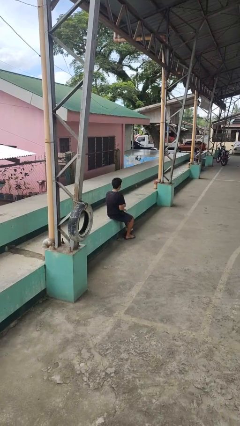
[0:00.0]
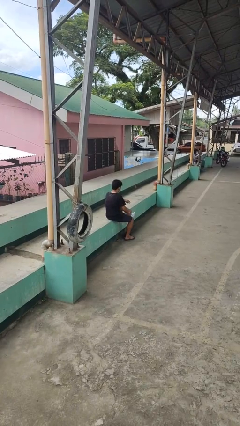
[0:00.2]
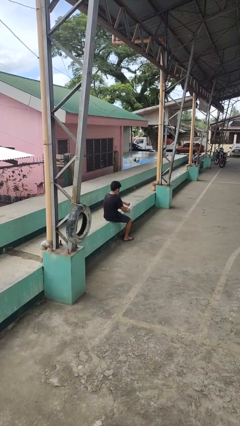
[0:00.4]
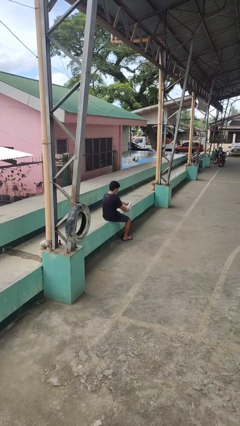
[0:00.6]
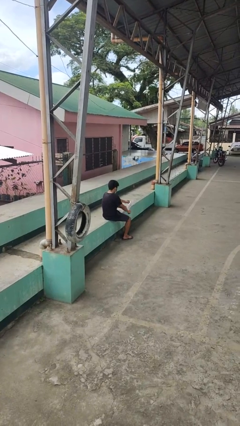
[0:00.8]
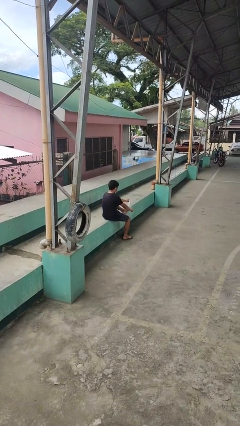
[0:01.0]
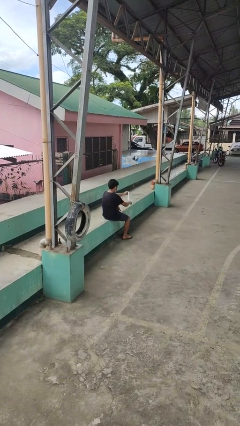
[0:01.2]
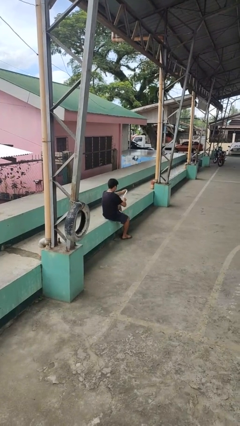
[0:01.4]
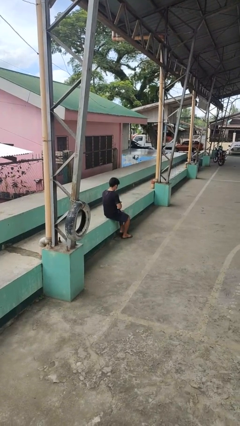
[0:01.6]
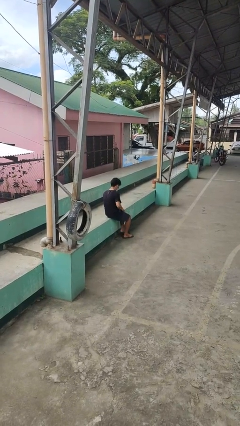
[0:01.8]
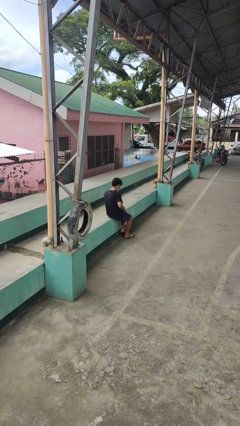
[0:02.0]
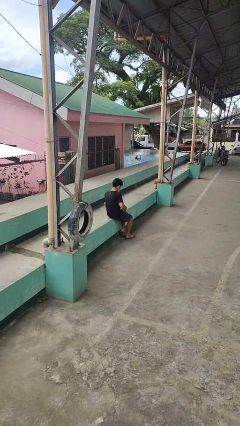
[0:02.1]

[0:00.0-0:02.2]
person takes off socks

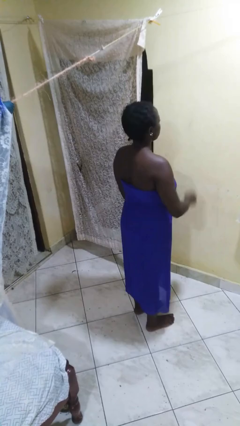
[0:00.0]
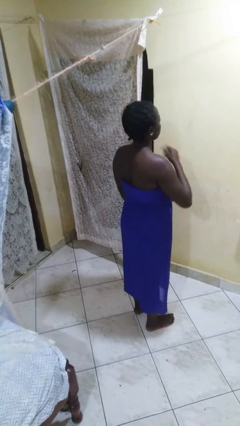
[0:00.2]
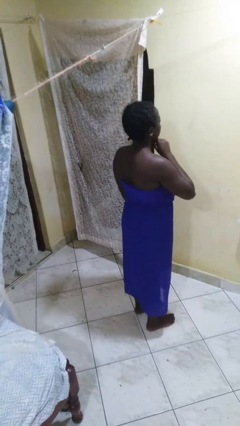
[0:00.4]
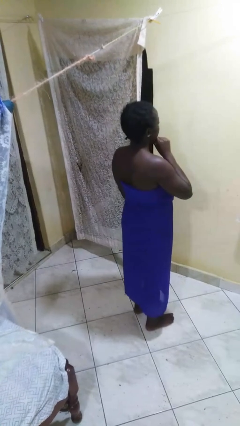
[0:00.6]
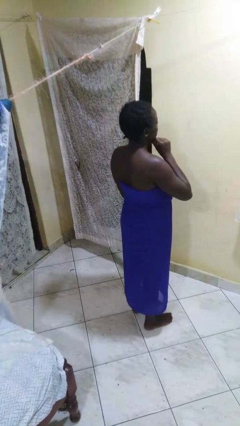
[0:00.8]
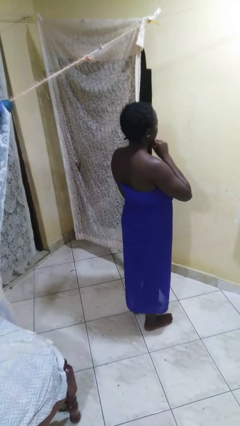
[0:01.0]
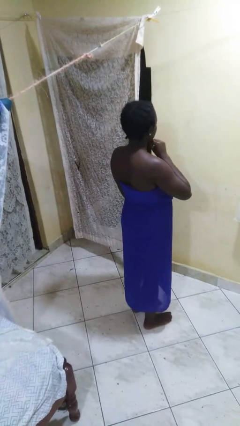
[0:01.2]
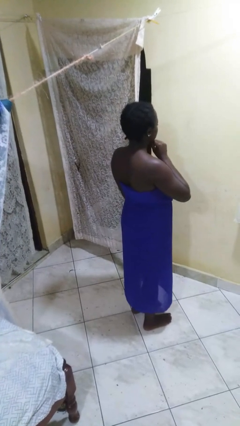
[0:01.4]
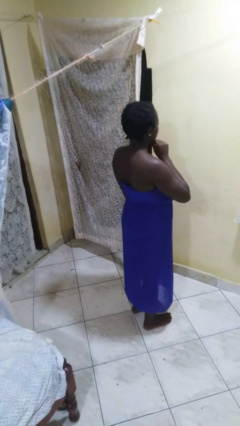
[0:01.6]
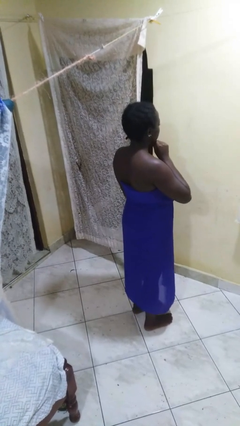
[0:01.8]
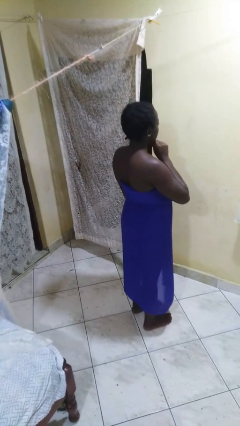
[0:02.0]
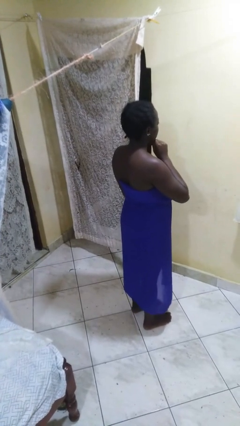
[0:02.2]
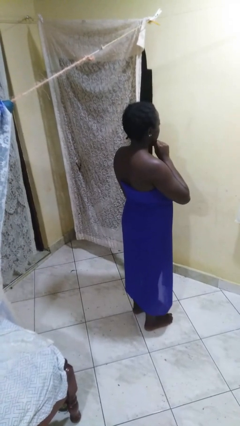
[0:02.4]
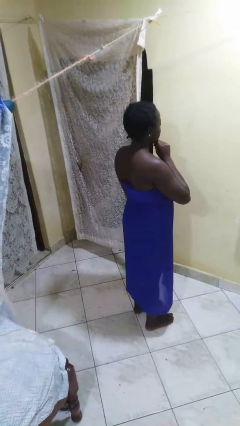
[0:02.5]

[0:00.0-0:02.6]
person strokes chin

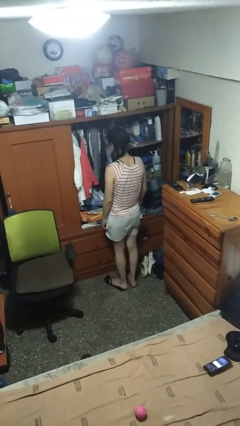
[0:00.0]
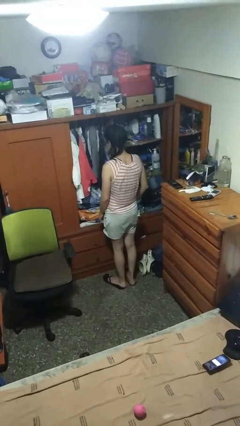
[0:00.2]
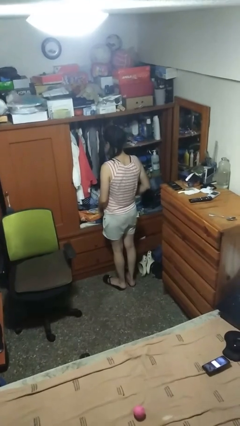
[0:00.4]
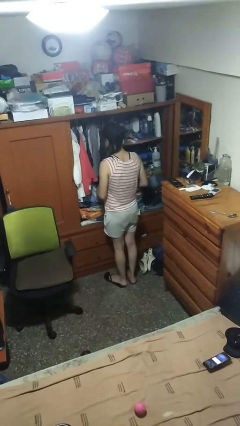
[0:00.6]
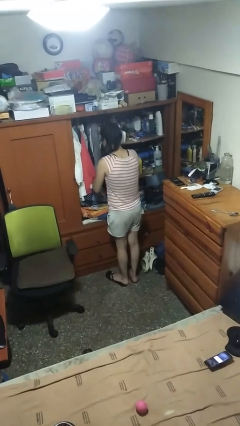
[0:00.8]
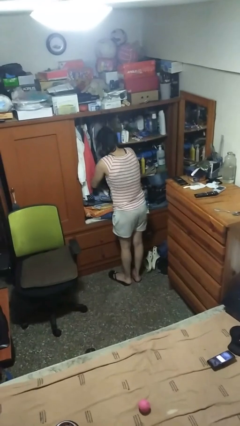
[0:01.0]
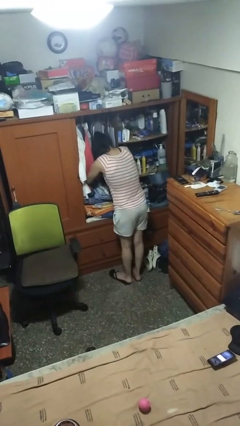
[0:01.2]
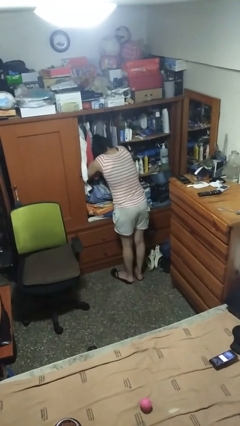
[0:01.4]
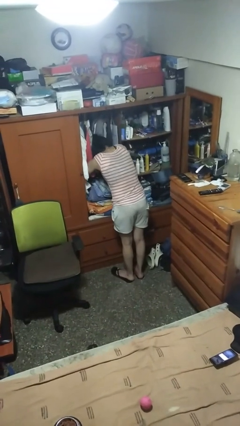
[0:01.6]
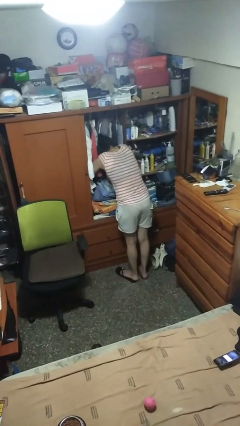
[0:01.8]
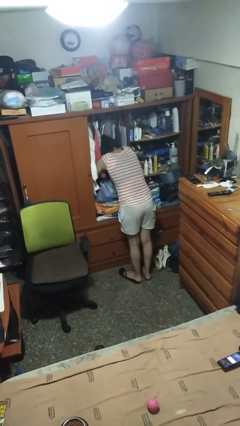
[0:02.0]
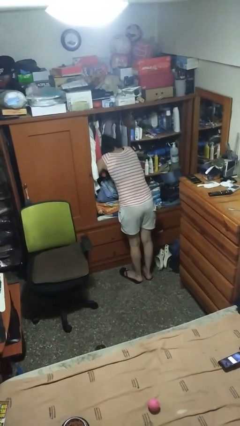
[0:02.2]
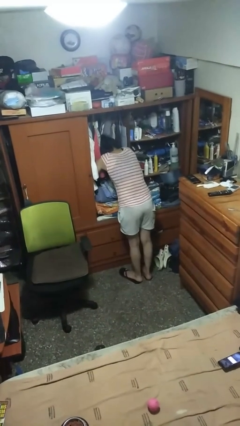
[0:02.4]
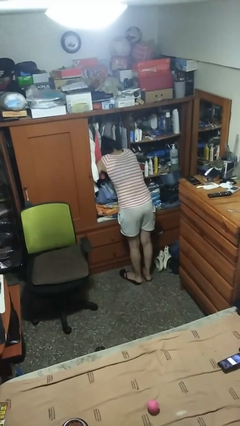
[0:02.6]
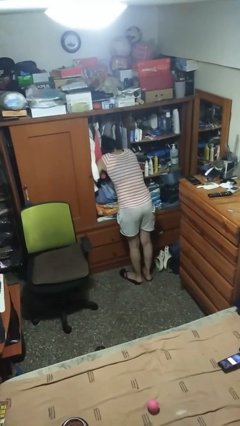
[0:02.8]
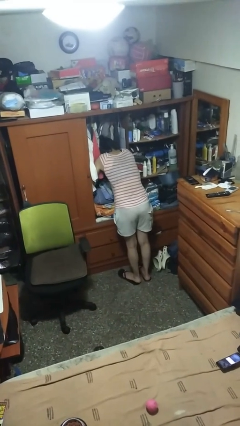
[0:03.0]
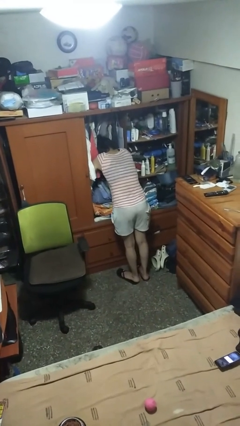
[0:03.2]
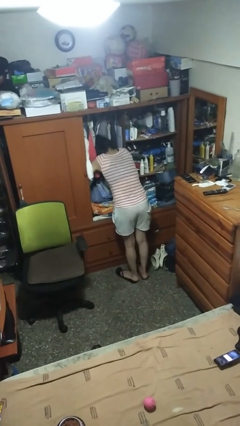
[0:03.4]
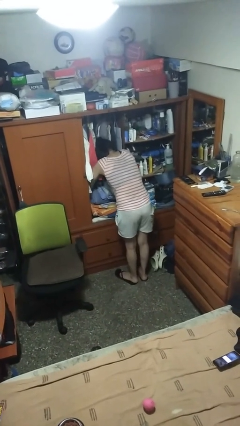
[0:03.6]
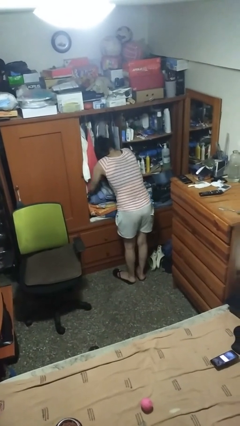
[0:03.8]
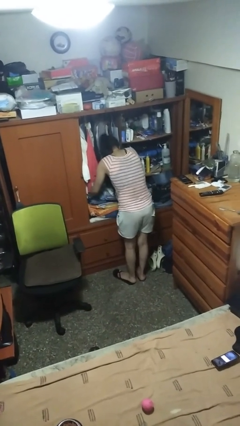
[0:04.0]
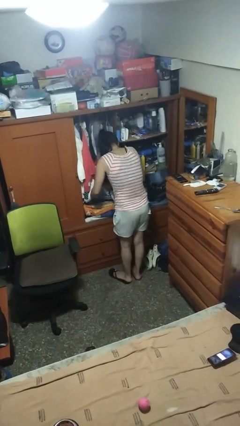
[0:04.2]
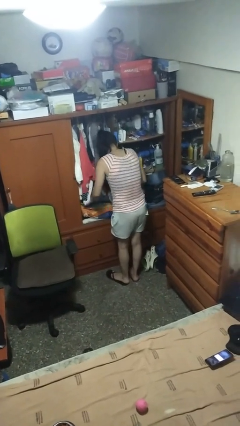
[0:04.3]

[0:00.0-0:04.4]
person searches in cabinet

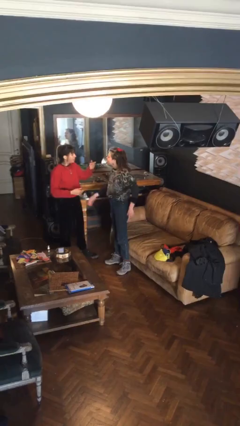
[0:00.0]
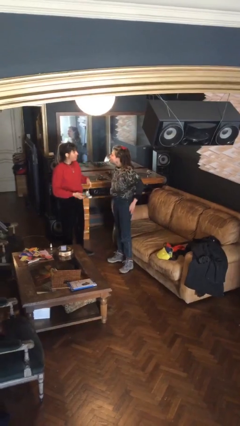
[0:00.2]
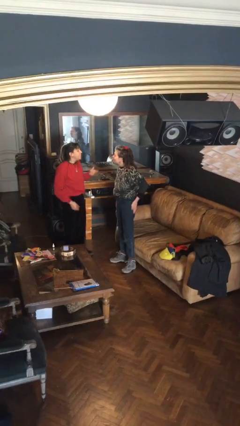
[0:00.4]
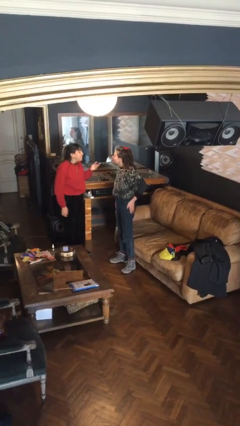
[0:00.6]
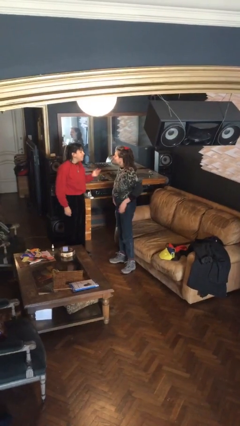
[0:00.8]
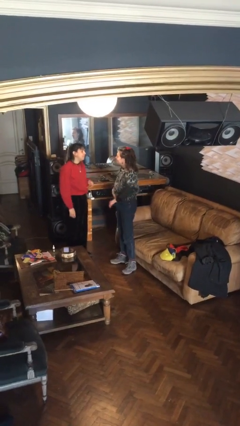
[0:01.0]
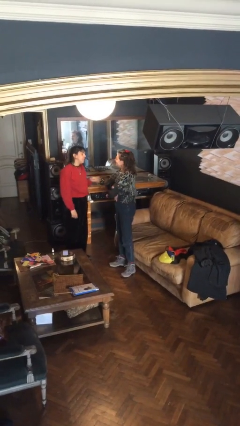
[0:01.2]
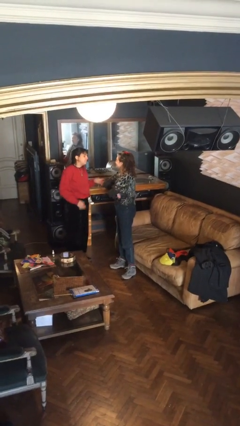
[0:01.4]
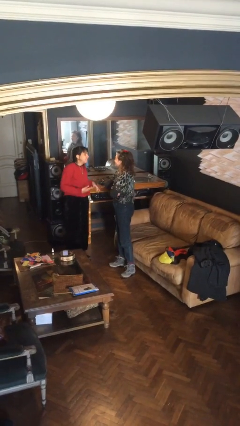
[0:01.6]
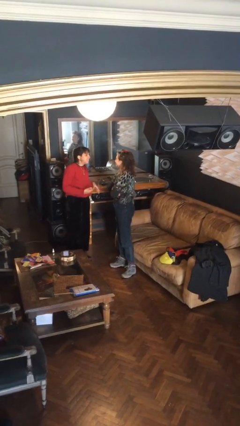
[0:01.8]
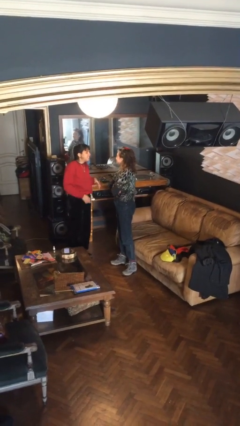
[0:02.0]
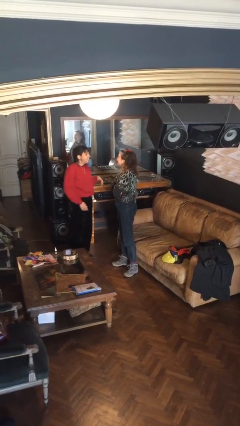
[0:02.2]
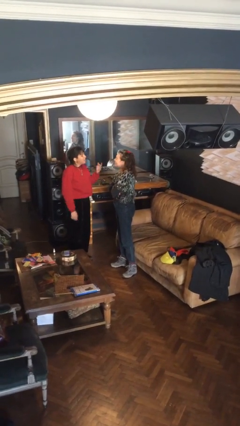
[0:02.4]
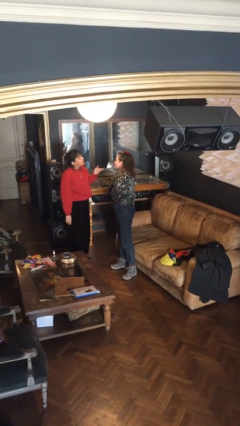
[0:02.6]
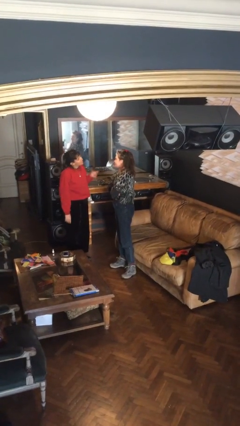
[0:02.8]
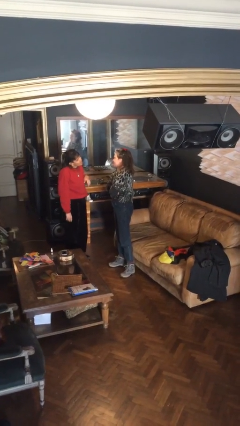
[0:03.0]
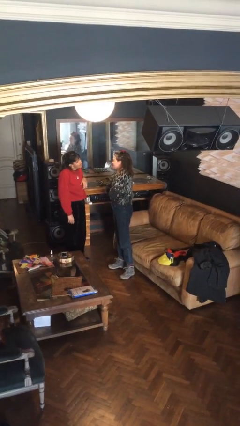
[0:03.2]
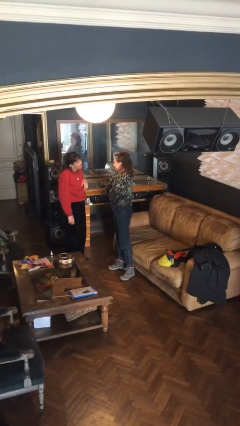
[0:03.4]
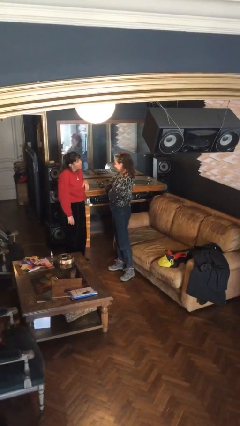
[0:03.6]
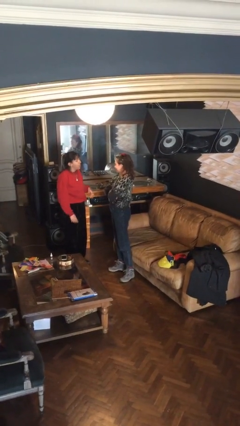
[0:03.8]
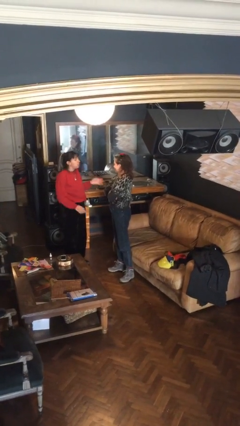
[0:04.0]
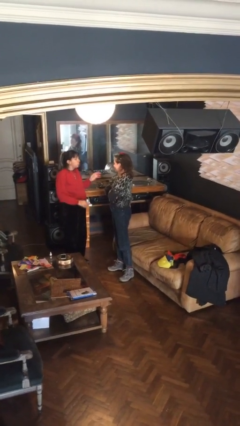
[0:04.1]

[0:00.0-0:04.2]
person talks to person

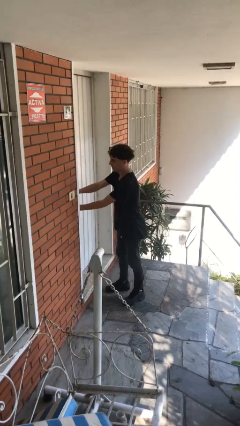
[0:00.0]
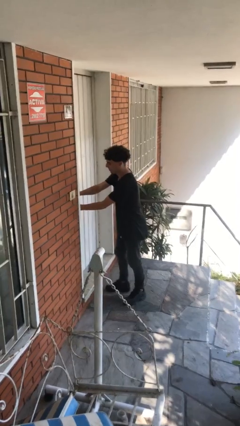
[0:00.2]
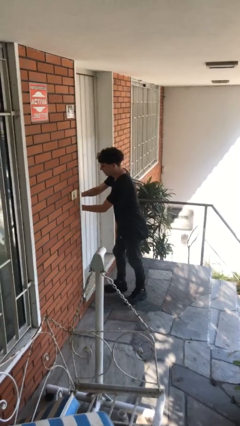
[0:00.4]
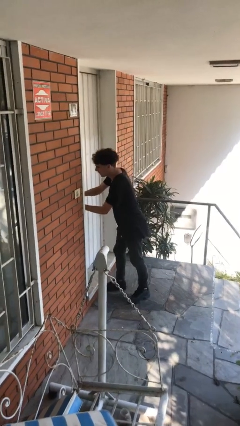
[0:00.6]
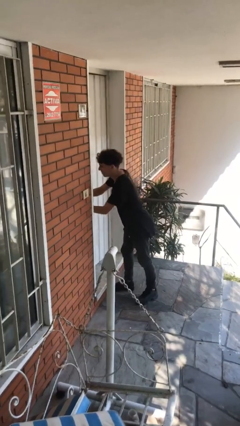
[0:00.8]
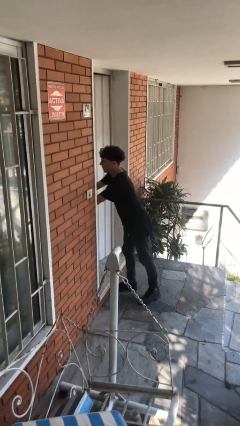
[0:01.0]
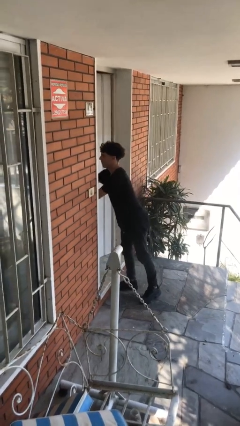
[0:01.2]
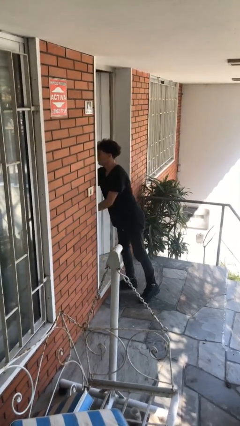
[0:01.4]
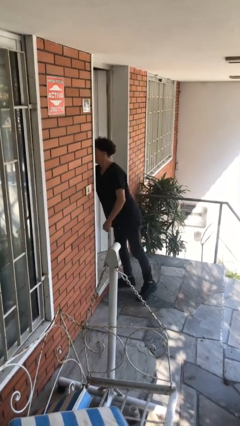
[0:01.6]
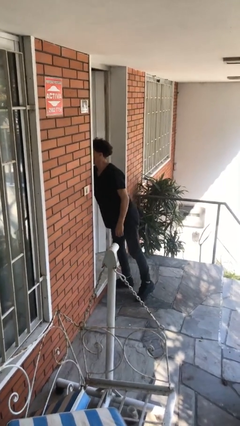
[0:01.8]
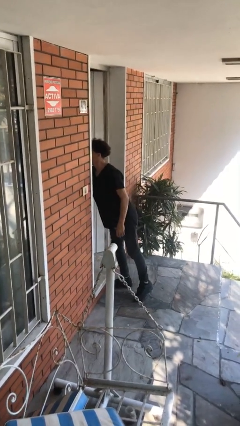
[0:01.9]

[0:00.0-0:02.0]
person opens facility door

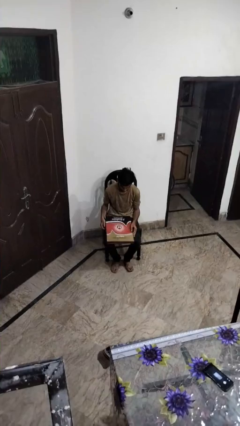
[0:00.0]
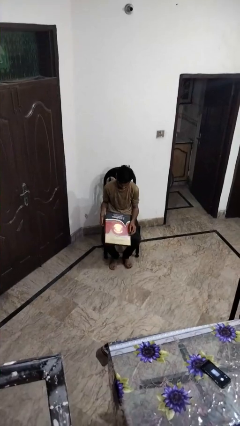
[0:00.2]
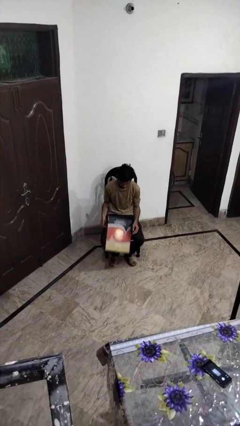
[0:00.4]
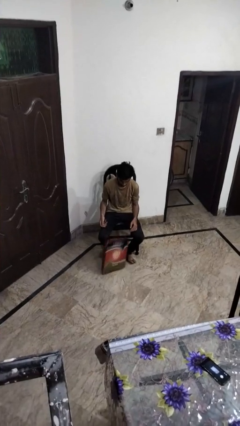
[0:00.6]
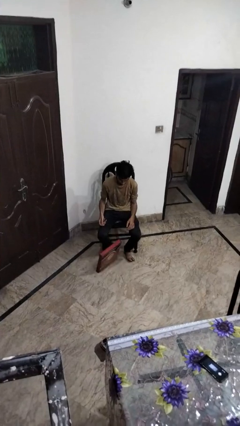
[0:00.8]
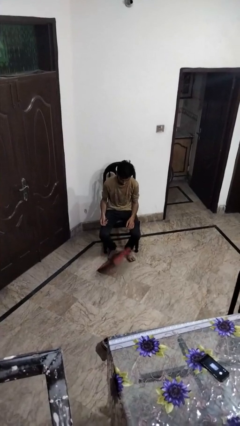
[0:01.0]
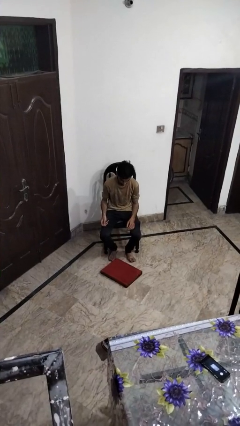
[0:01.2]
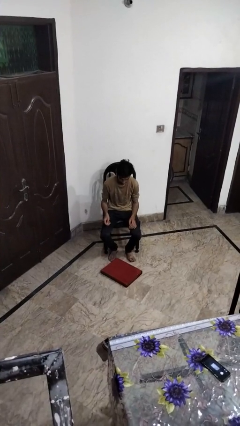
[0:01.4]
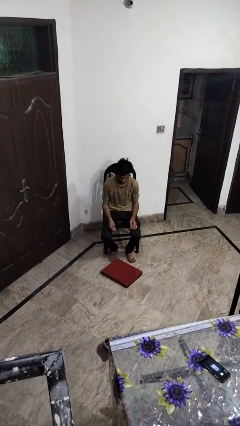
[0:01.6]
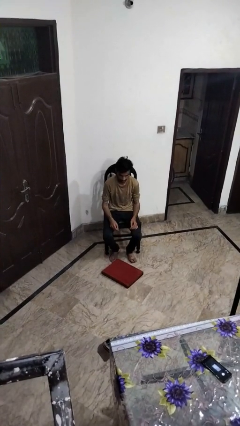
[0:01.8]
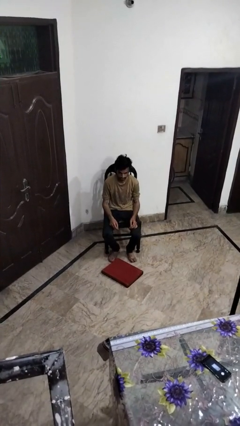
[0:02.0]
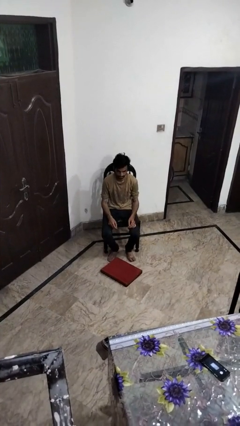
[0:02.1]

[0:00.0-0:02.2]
person drops object
